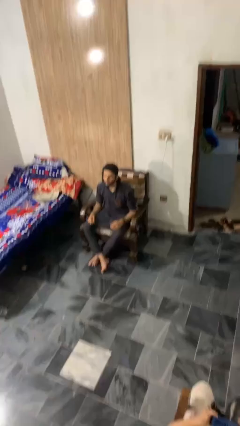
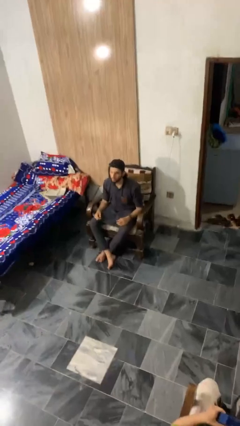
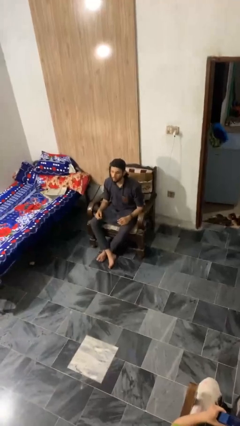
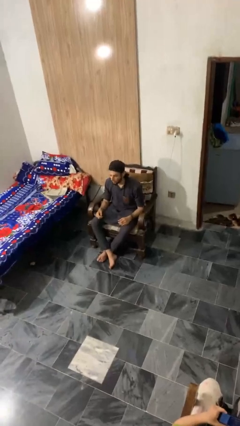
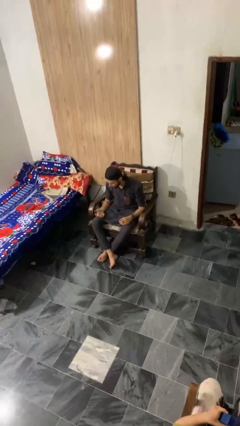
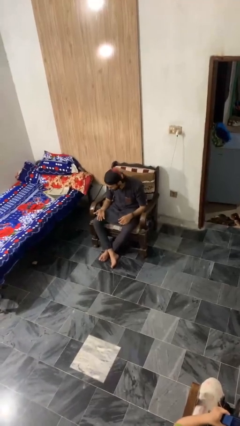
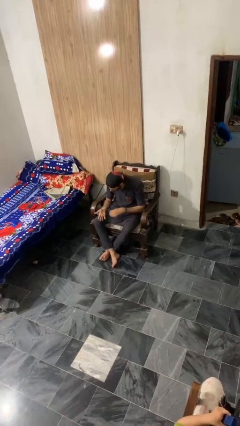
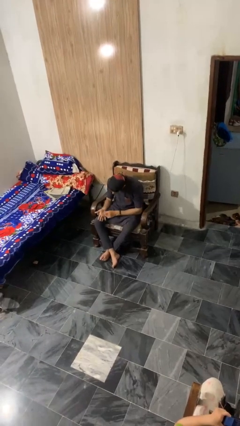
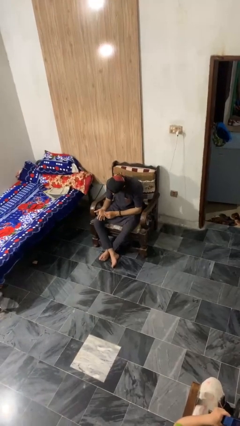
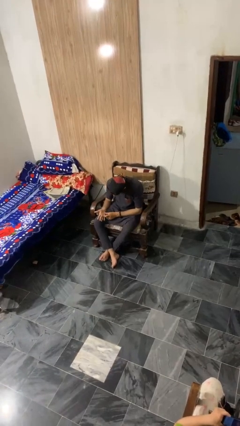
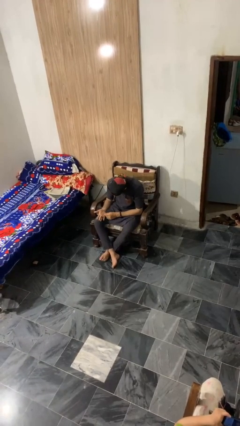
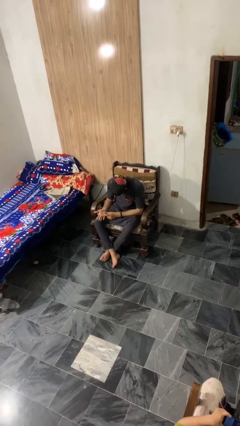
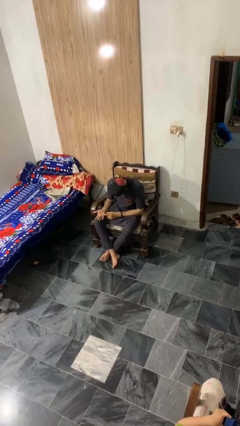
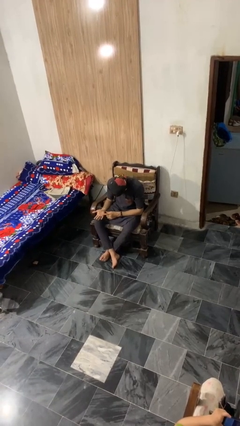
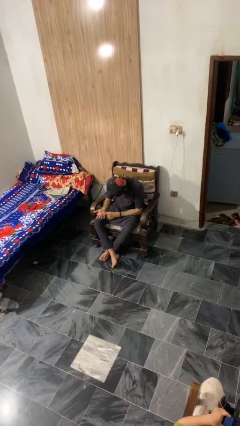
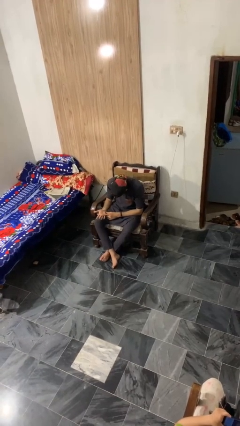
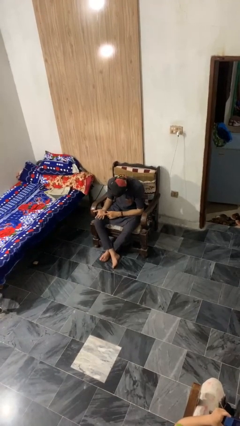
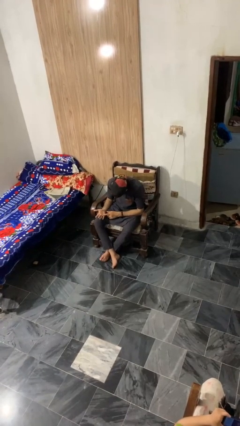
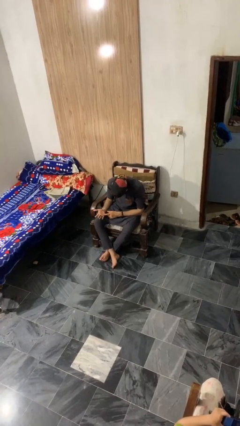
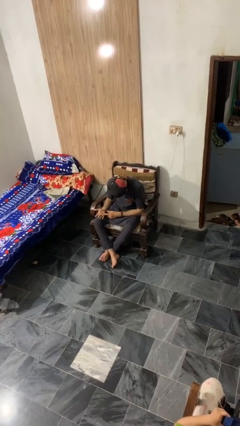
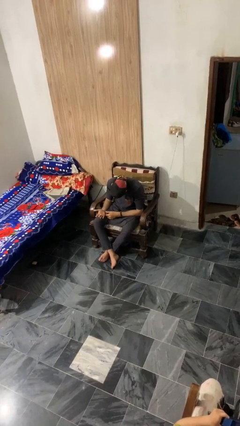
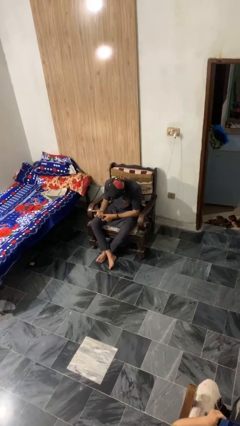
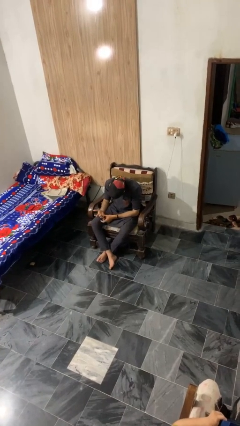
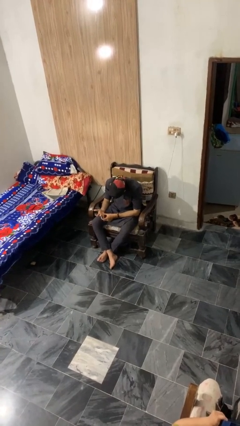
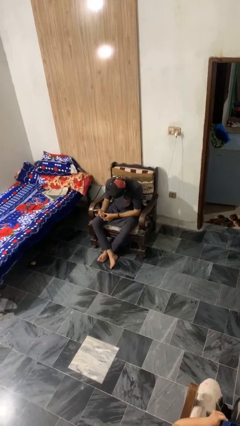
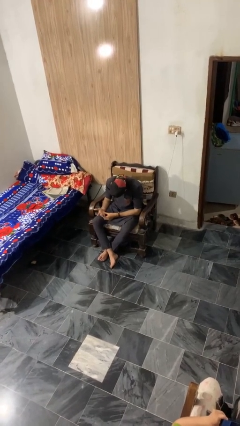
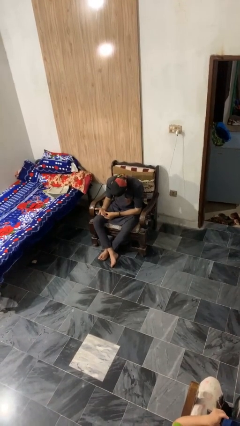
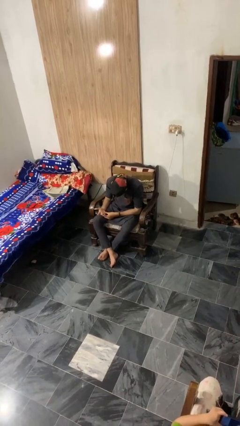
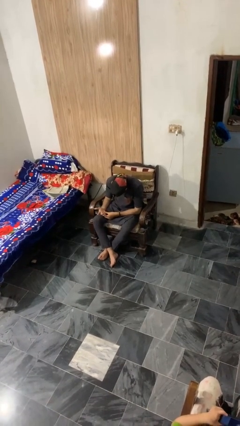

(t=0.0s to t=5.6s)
person looks at hands in lap

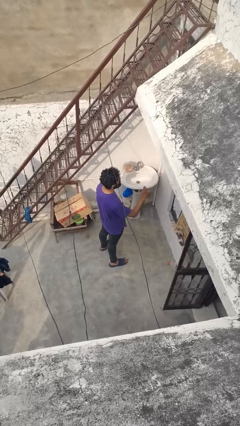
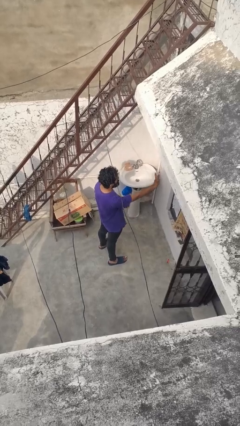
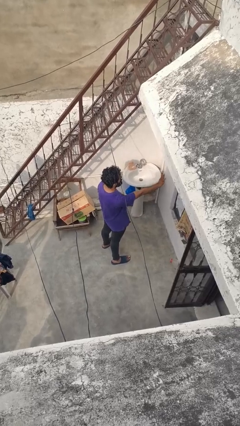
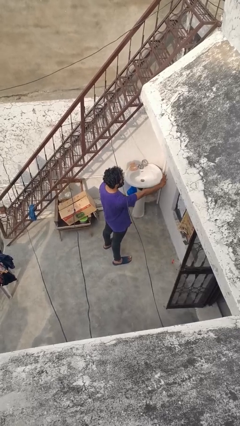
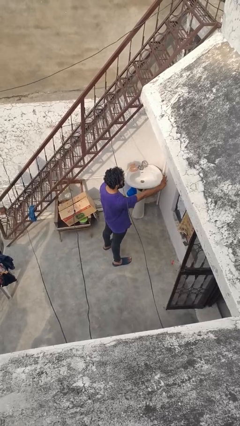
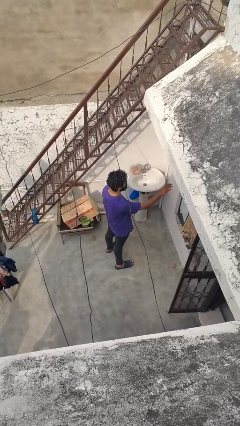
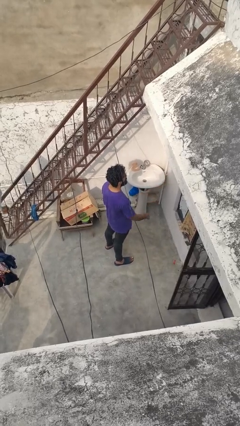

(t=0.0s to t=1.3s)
person gestures stop

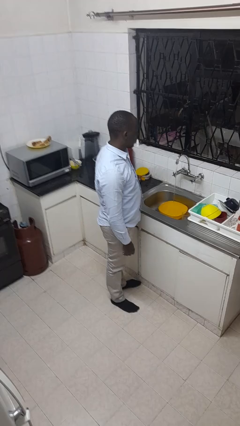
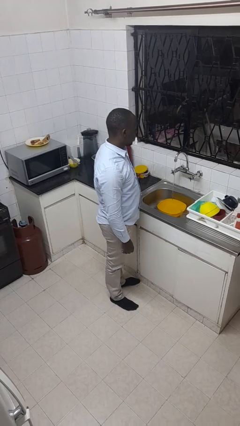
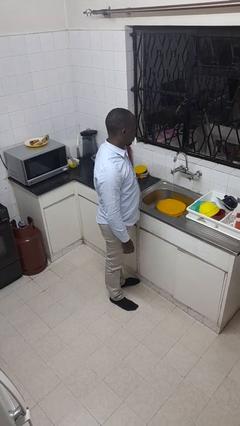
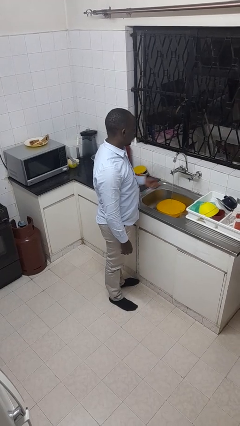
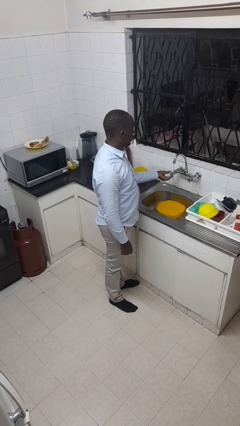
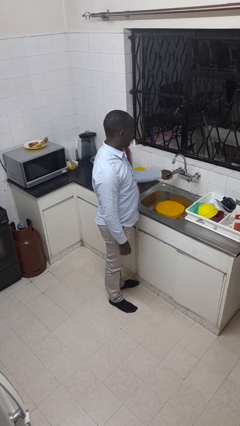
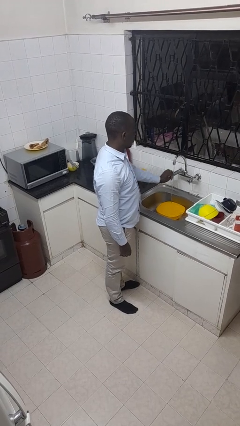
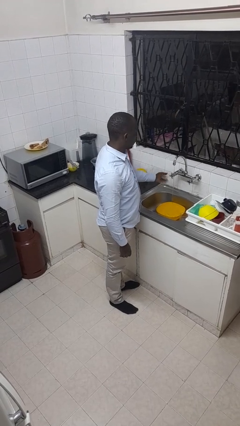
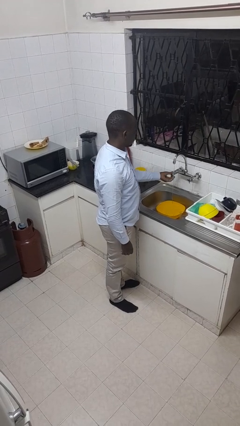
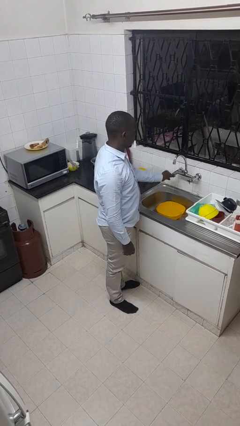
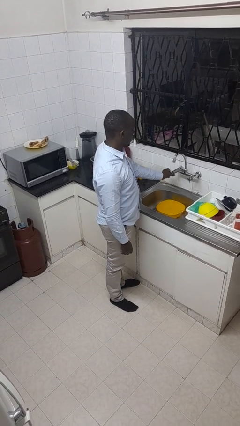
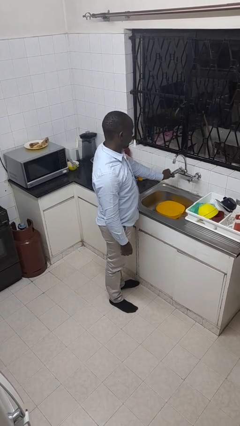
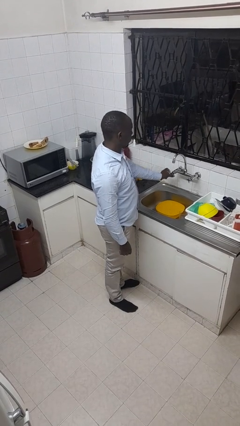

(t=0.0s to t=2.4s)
person turns off faucet

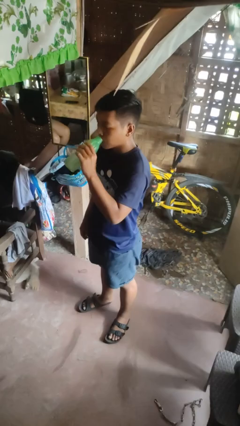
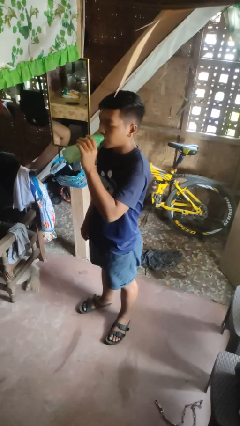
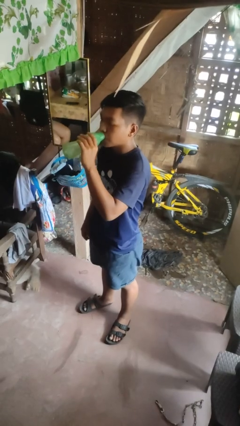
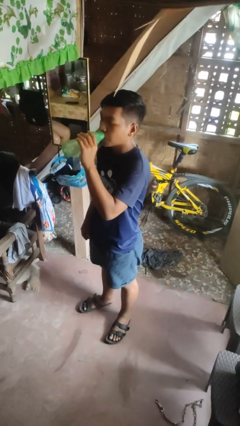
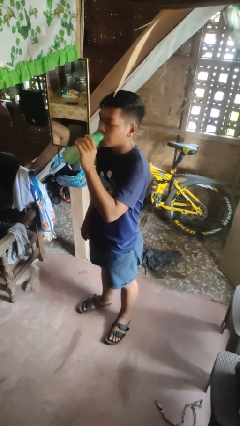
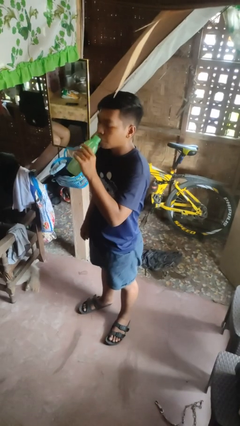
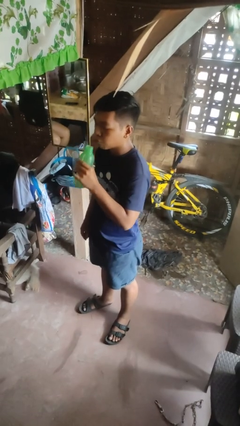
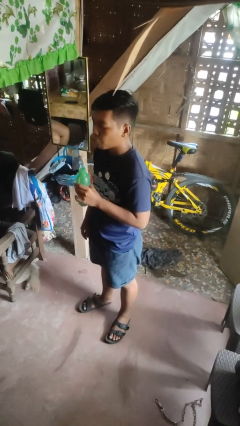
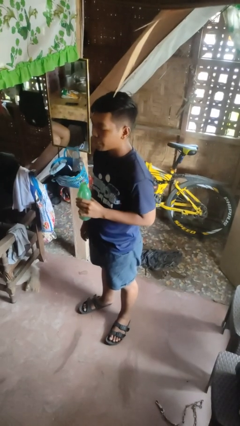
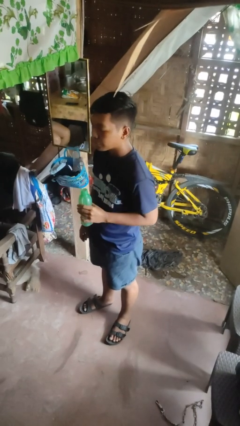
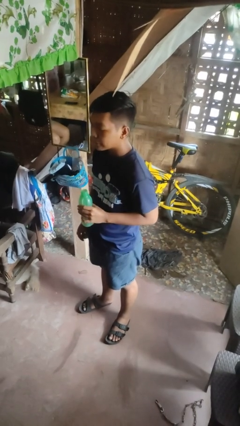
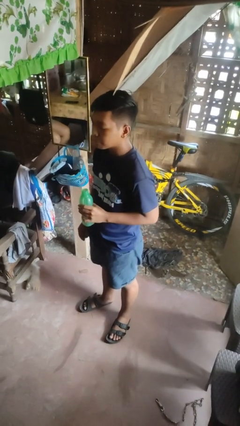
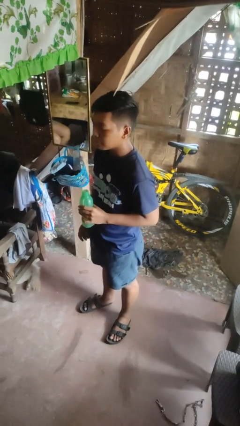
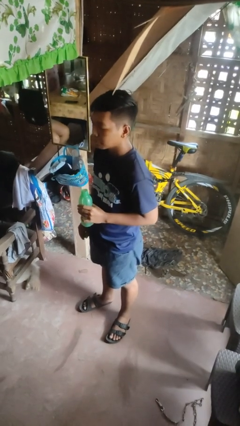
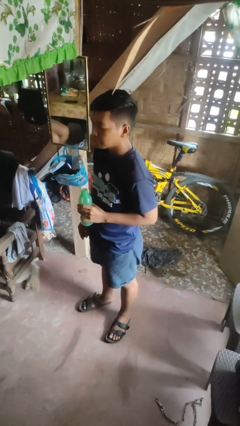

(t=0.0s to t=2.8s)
person drinks from bottle

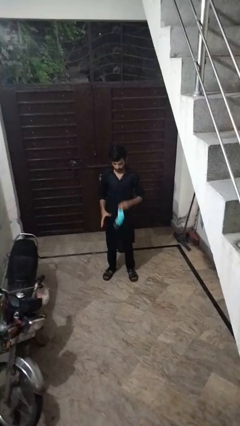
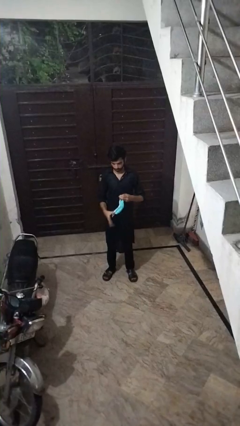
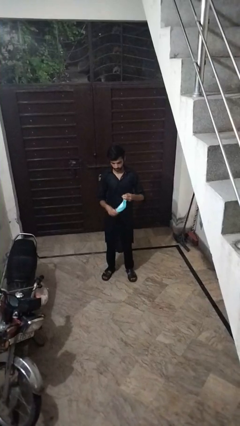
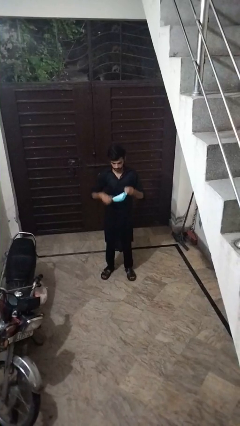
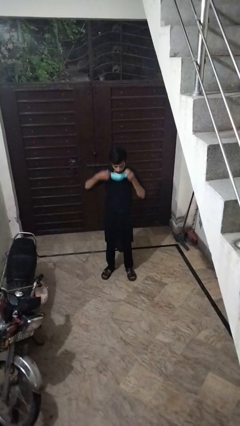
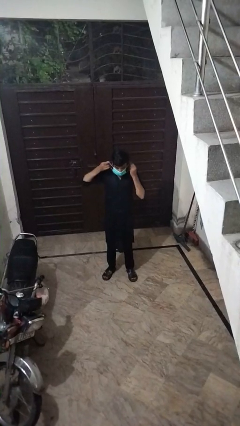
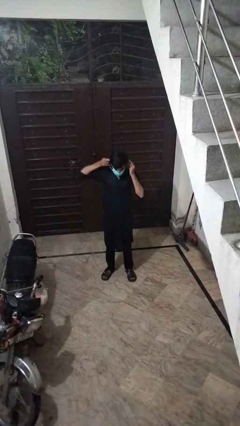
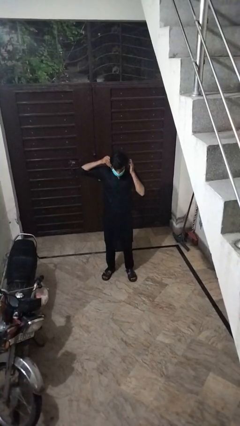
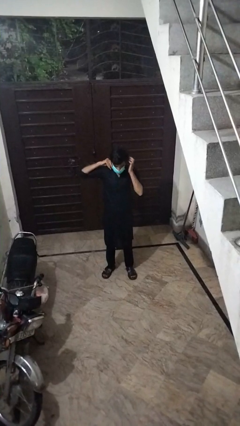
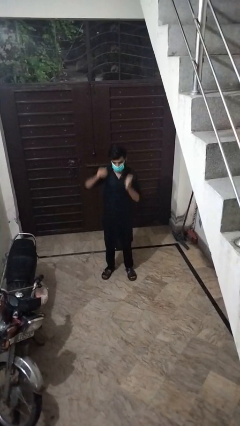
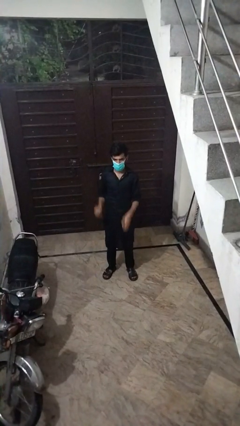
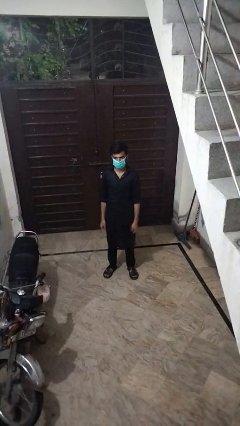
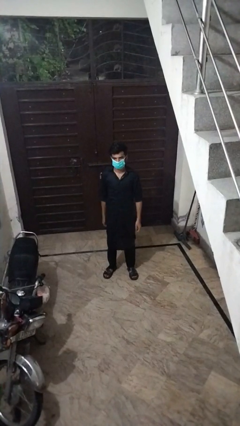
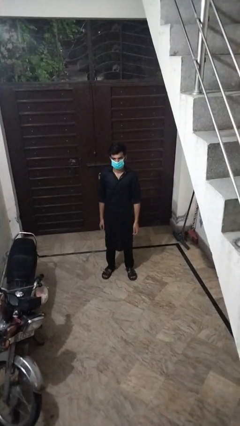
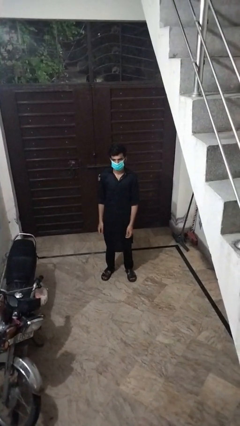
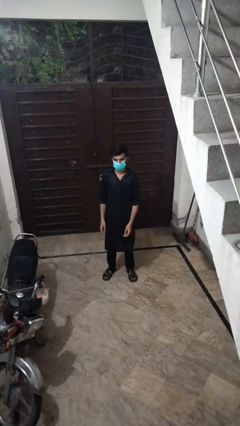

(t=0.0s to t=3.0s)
person puts on facemask

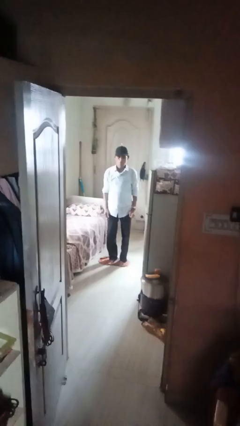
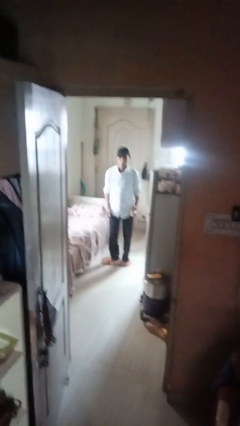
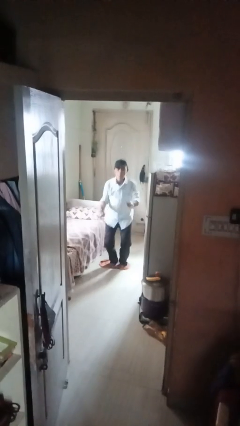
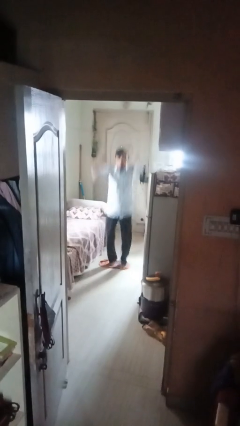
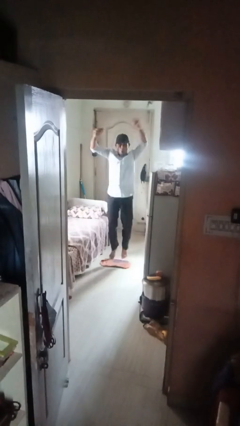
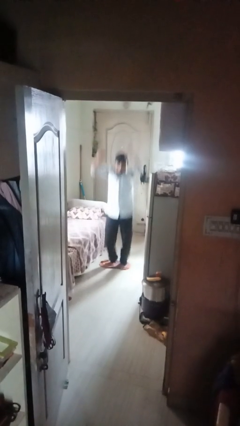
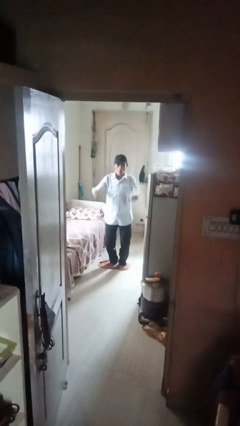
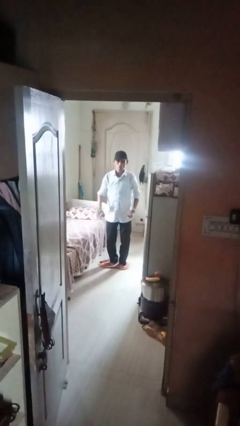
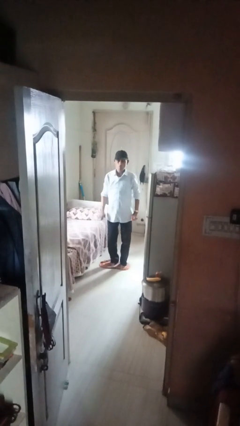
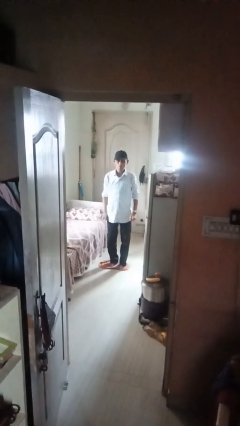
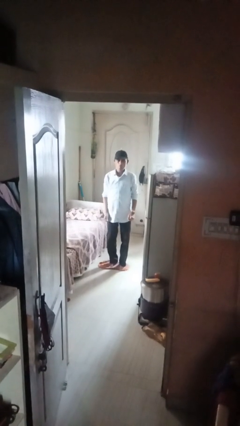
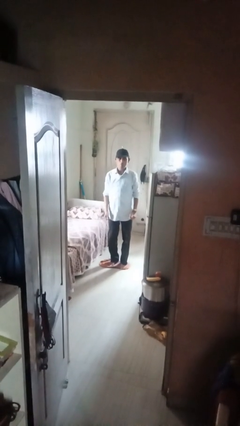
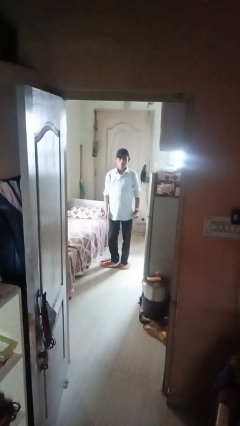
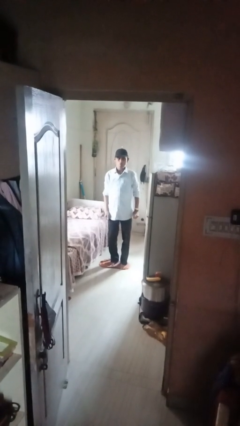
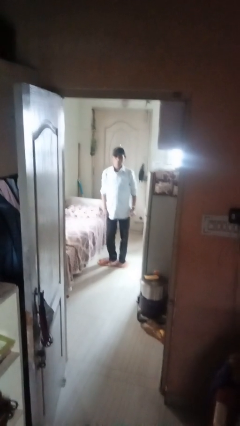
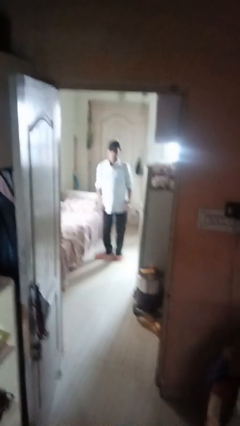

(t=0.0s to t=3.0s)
person jumps
